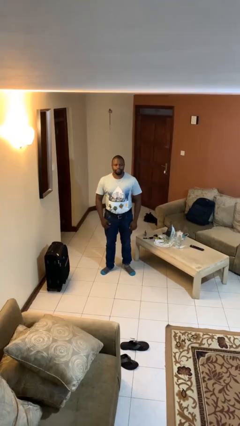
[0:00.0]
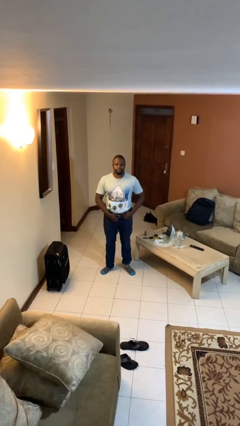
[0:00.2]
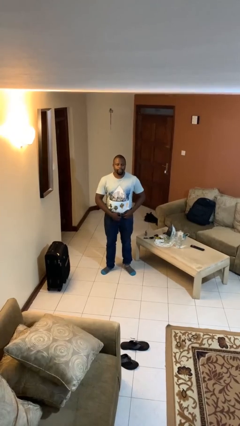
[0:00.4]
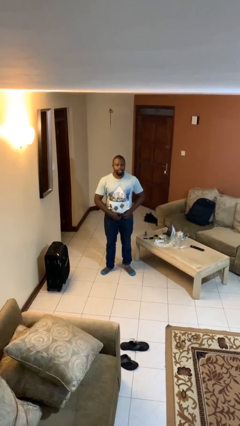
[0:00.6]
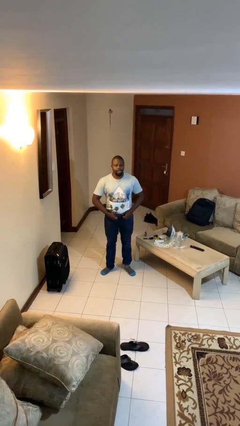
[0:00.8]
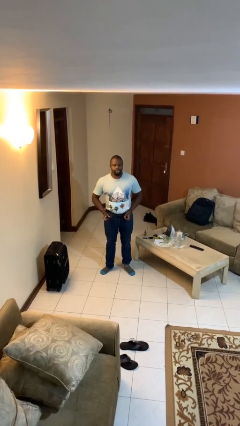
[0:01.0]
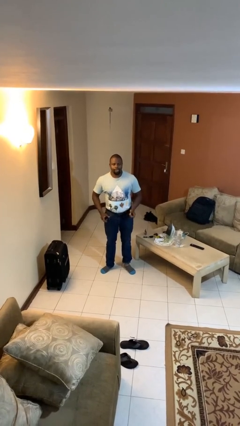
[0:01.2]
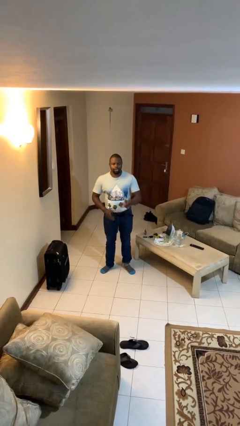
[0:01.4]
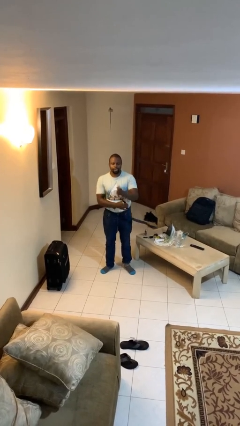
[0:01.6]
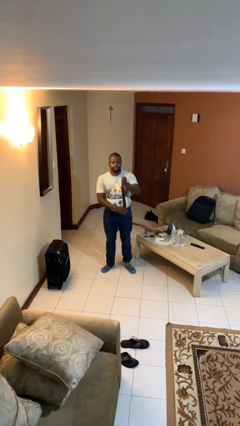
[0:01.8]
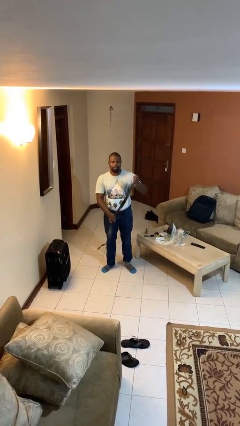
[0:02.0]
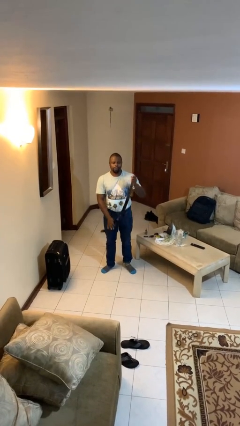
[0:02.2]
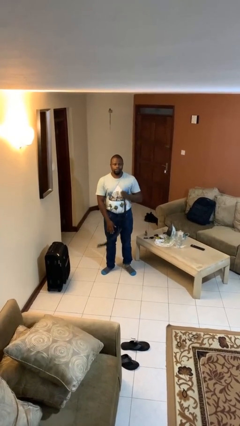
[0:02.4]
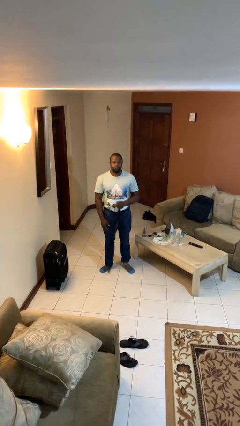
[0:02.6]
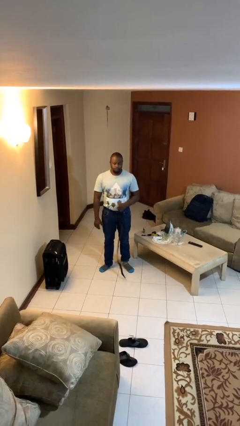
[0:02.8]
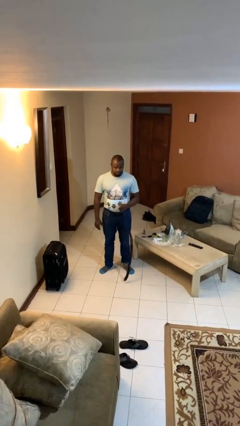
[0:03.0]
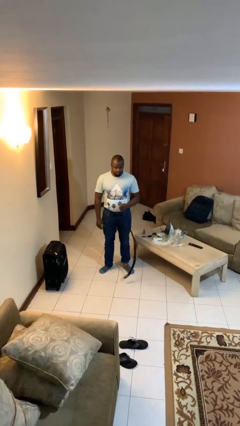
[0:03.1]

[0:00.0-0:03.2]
person takes off belt

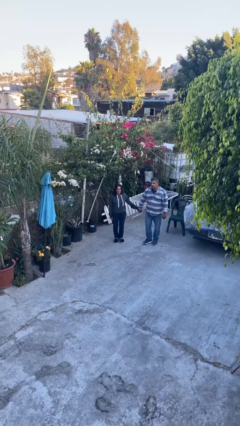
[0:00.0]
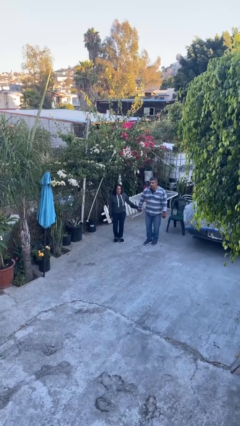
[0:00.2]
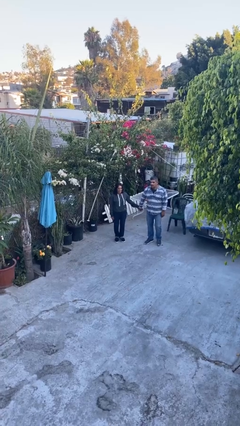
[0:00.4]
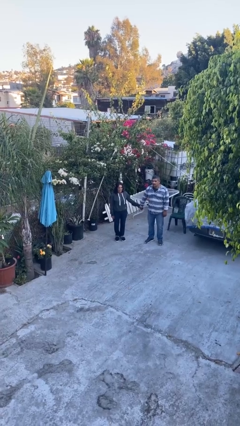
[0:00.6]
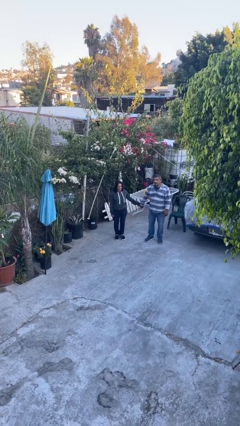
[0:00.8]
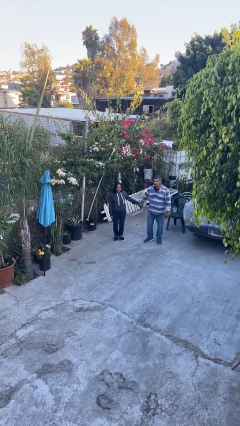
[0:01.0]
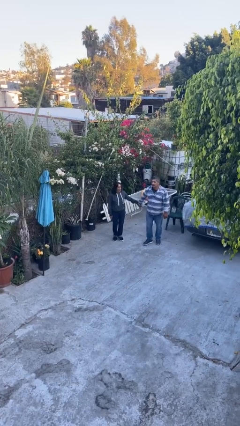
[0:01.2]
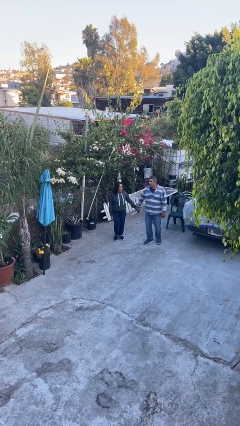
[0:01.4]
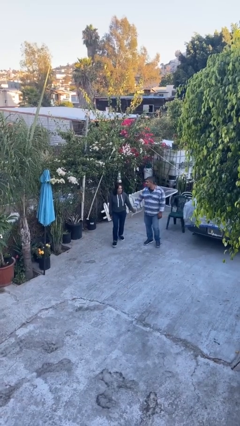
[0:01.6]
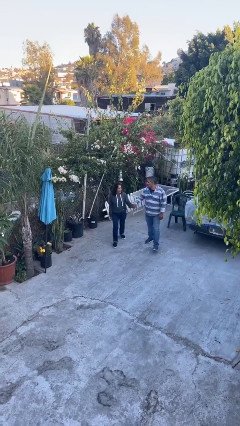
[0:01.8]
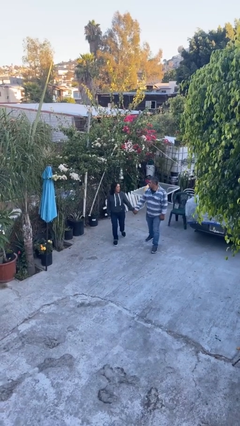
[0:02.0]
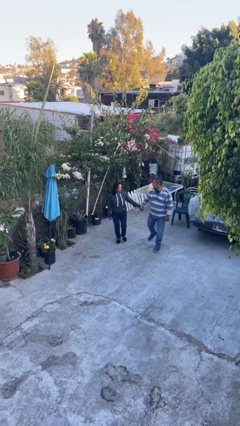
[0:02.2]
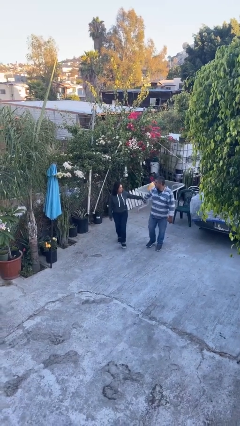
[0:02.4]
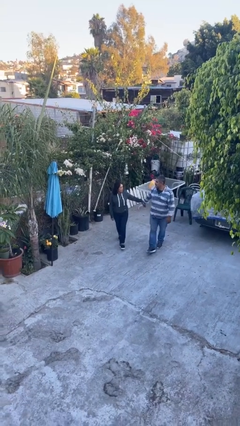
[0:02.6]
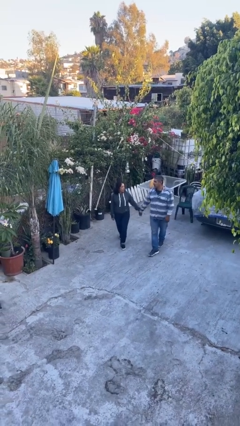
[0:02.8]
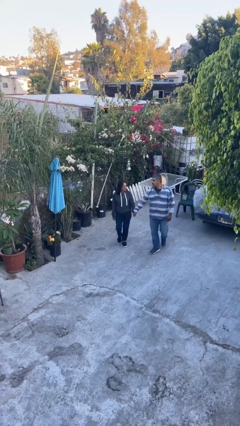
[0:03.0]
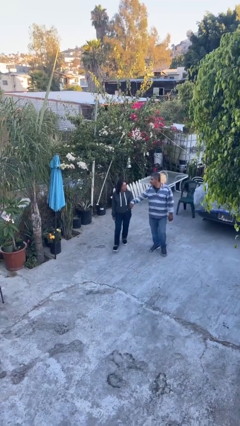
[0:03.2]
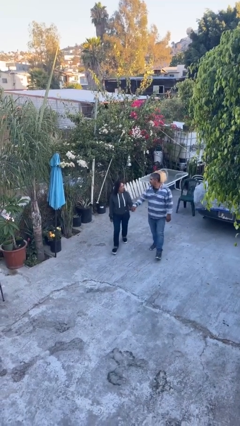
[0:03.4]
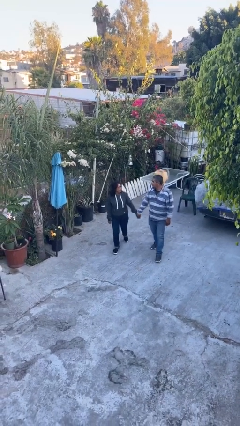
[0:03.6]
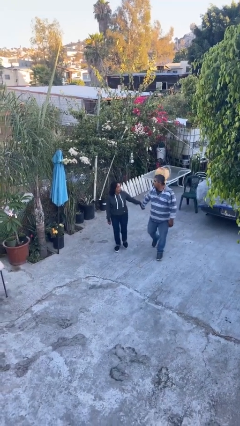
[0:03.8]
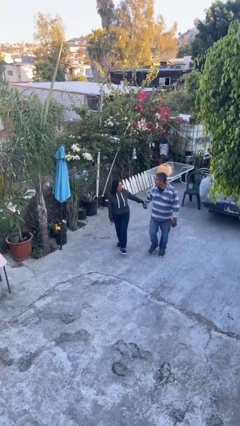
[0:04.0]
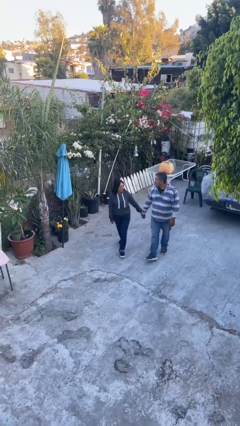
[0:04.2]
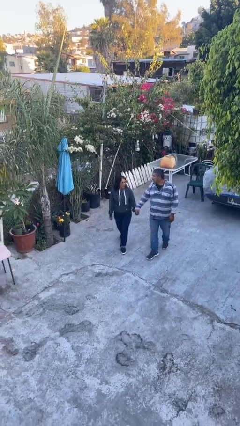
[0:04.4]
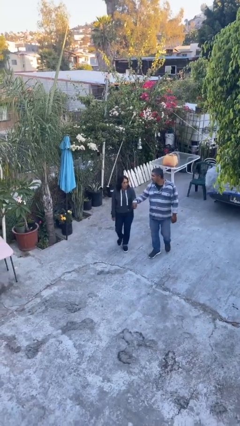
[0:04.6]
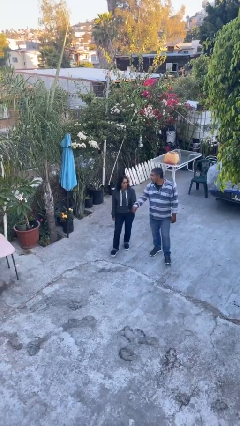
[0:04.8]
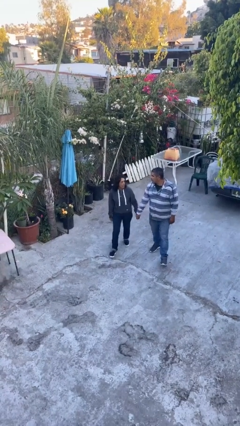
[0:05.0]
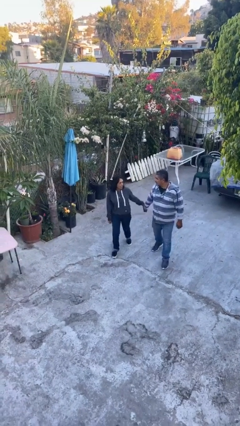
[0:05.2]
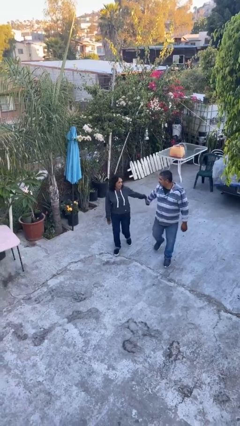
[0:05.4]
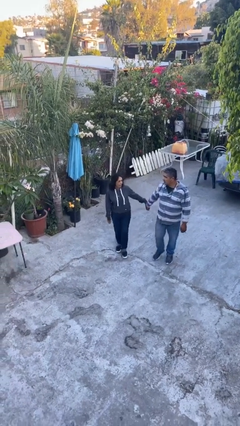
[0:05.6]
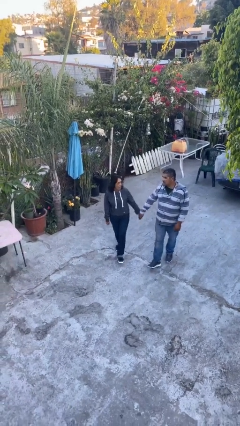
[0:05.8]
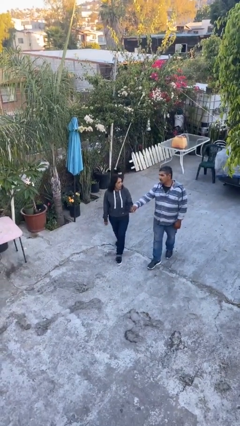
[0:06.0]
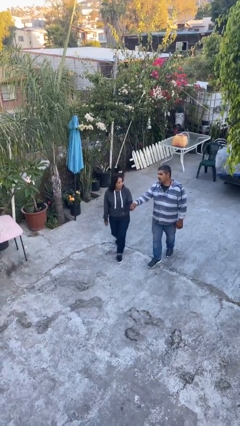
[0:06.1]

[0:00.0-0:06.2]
person holds hand

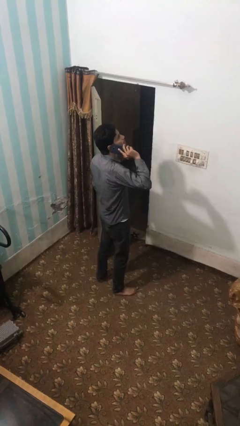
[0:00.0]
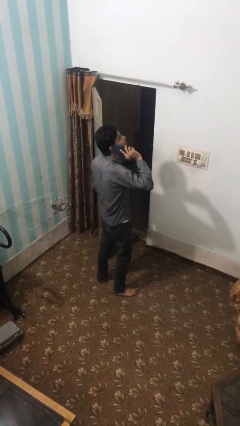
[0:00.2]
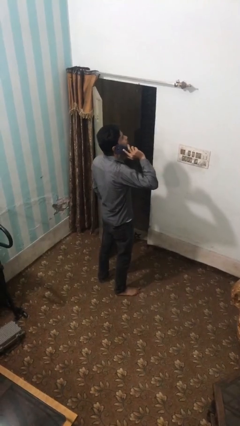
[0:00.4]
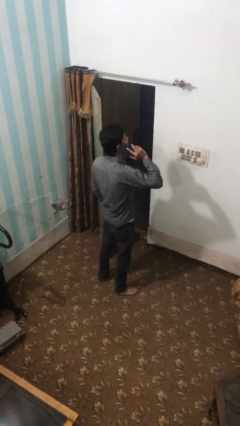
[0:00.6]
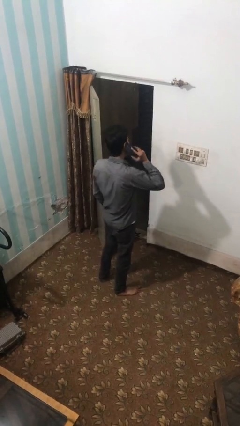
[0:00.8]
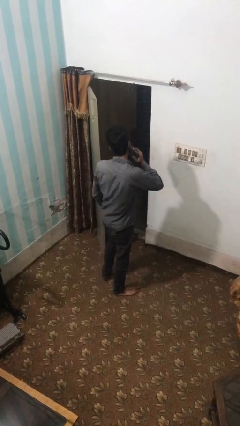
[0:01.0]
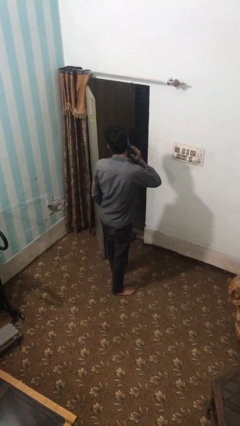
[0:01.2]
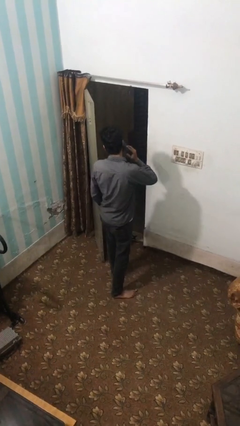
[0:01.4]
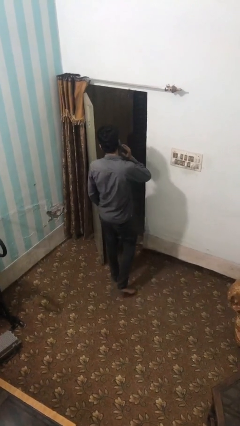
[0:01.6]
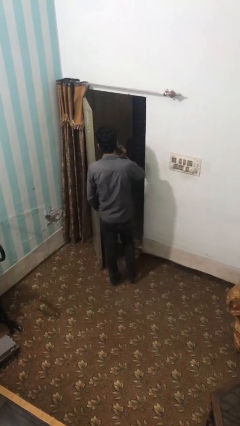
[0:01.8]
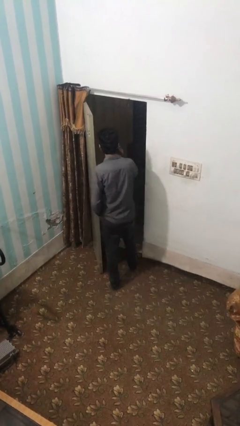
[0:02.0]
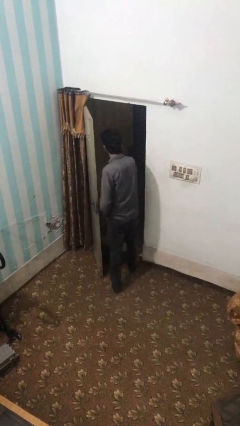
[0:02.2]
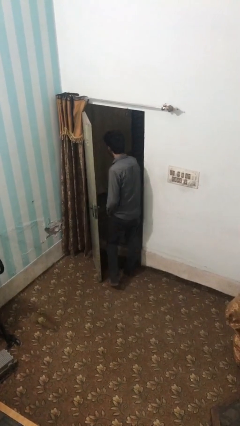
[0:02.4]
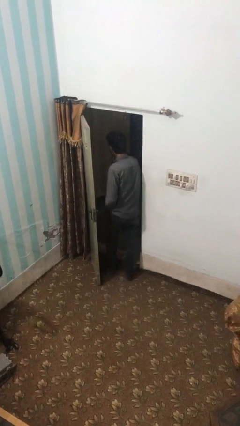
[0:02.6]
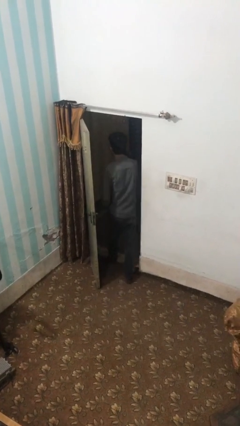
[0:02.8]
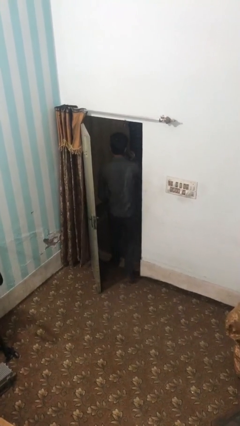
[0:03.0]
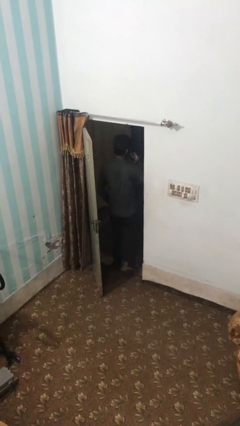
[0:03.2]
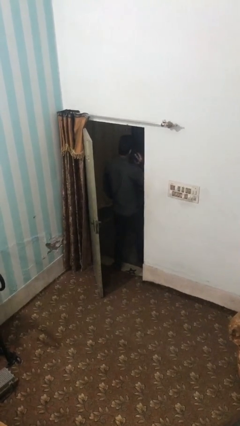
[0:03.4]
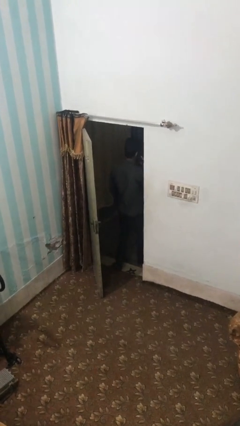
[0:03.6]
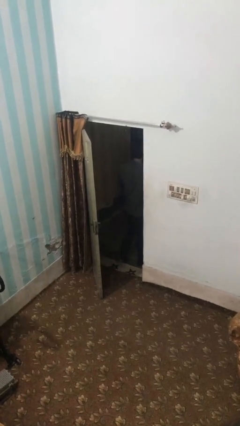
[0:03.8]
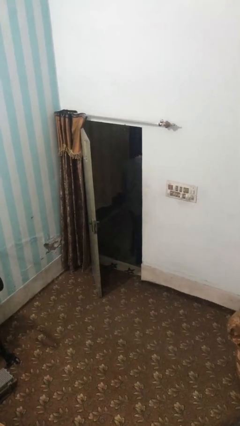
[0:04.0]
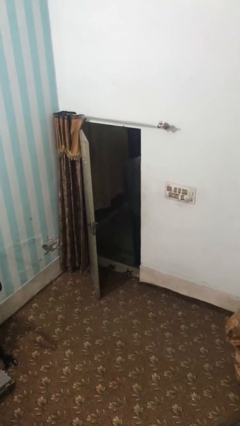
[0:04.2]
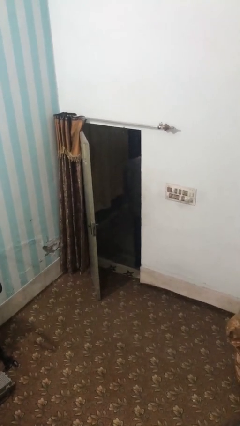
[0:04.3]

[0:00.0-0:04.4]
person exits scene through structure

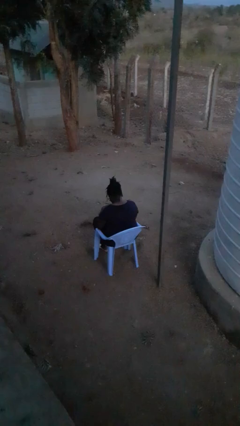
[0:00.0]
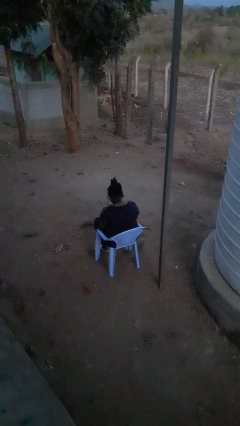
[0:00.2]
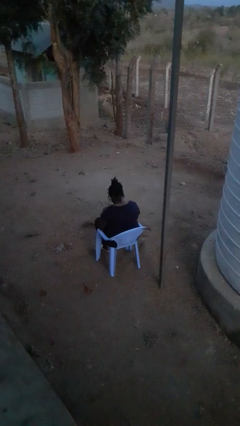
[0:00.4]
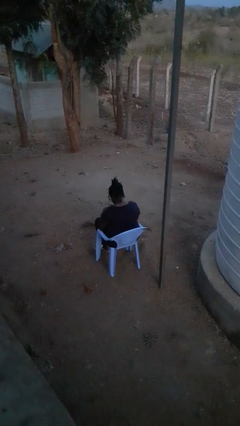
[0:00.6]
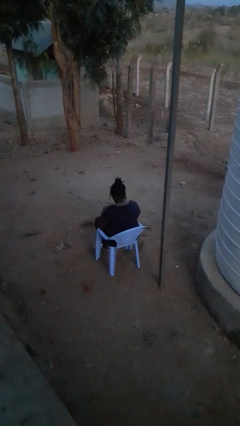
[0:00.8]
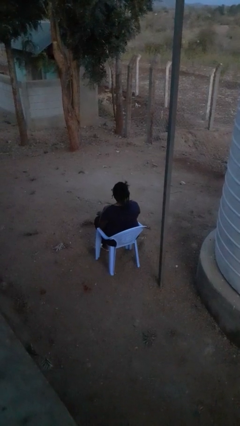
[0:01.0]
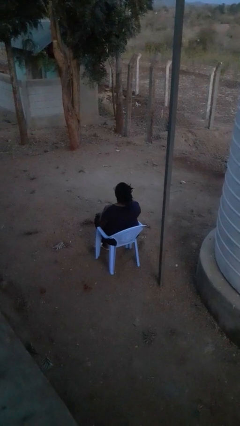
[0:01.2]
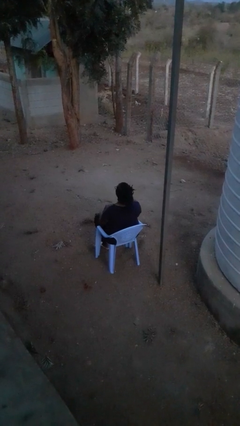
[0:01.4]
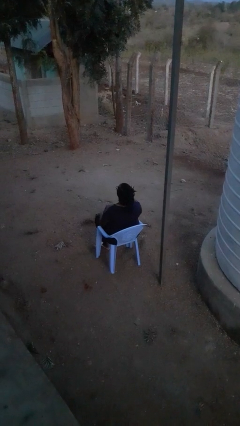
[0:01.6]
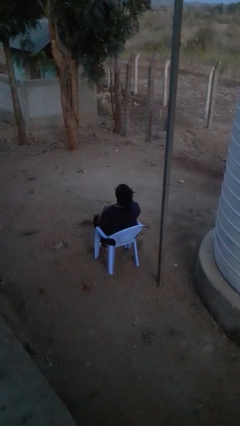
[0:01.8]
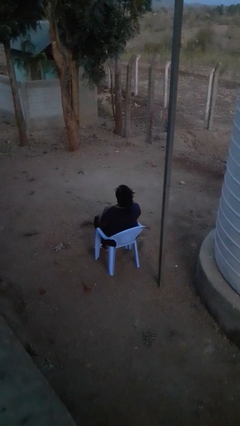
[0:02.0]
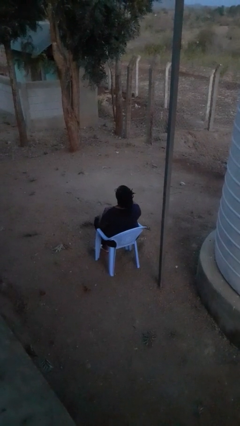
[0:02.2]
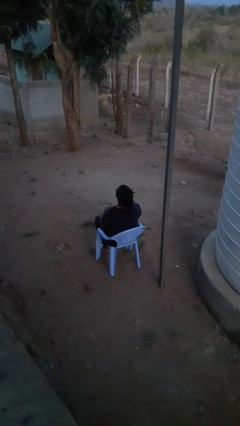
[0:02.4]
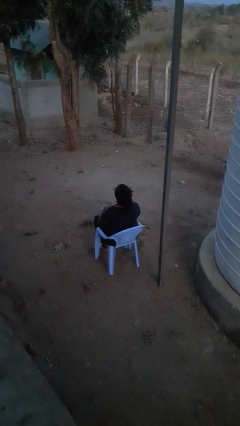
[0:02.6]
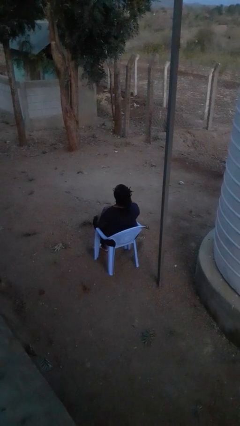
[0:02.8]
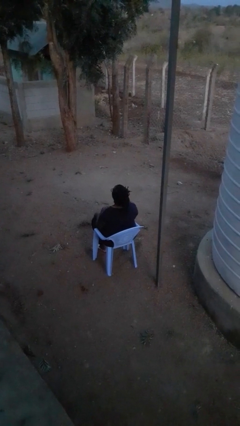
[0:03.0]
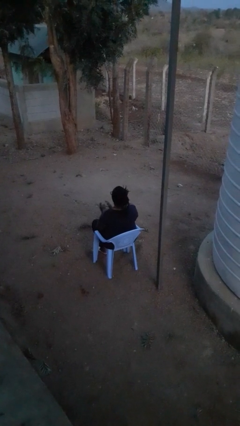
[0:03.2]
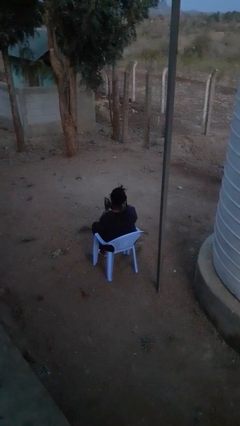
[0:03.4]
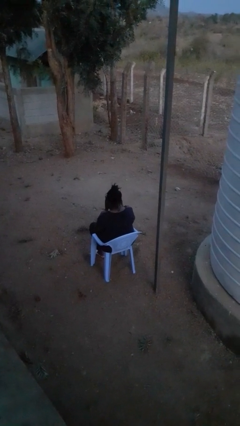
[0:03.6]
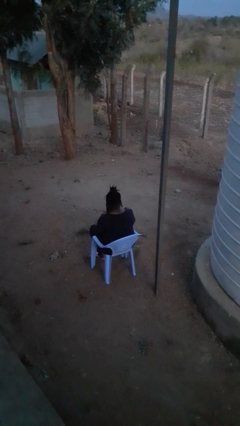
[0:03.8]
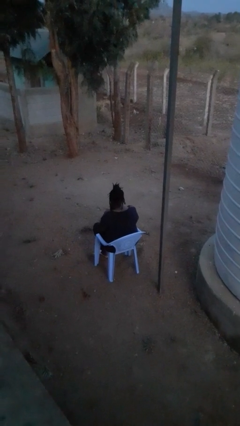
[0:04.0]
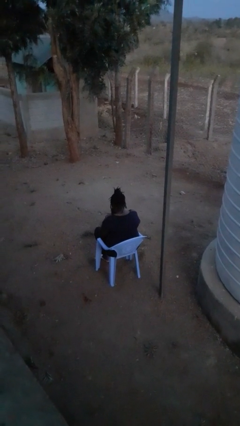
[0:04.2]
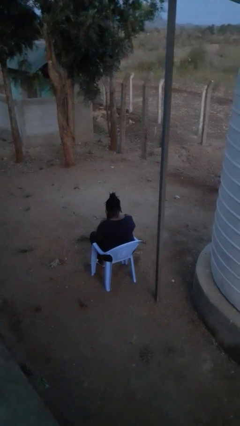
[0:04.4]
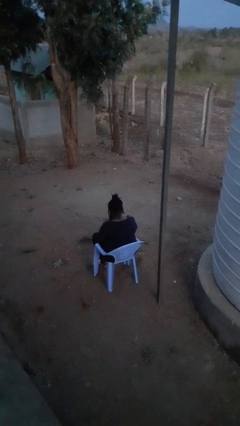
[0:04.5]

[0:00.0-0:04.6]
person prays
